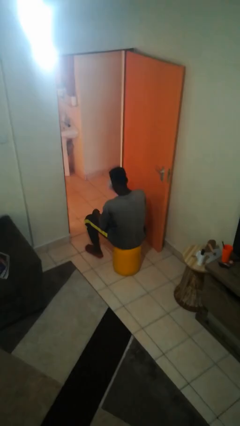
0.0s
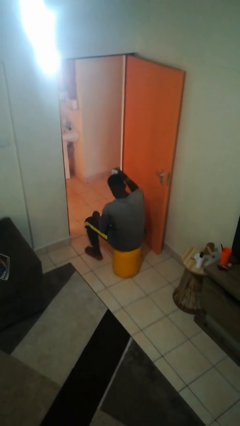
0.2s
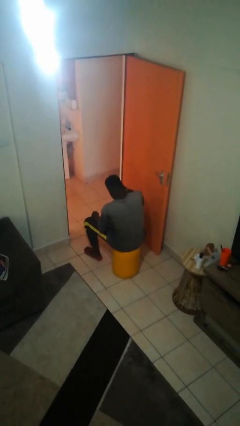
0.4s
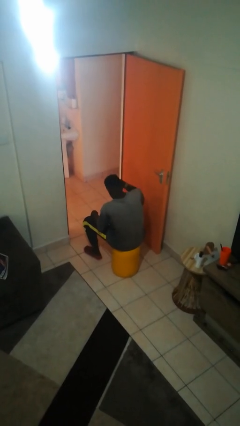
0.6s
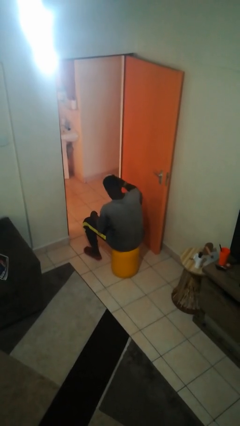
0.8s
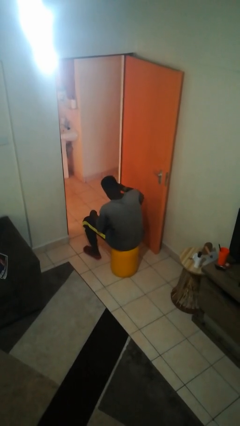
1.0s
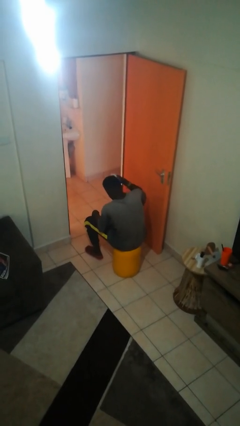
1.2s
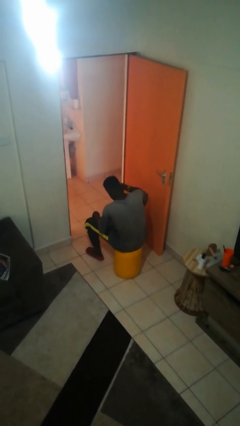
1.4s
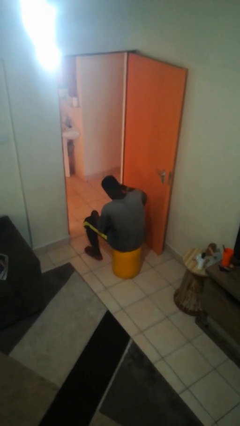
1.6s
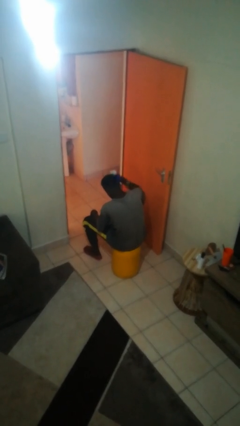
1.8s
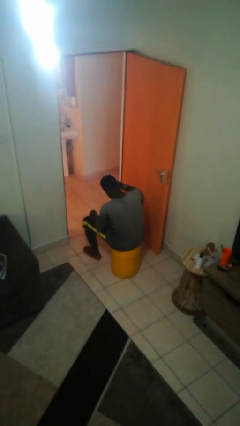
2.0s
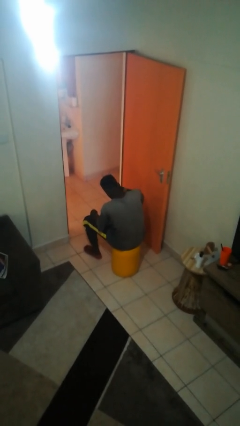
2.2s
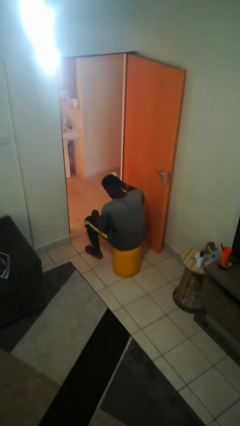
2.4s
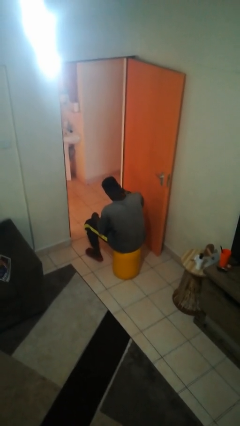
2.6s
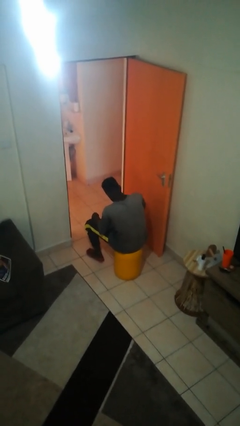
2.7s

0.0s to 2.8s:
person brushes hair

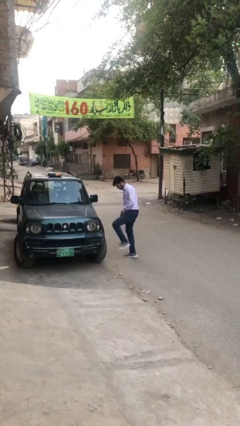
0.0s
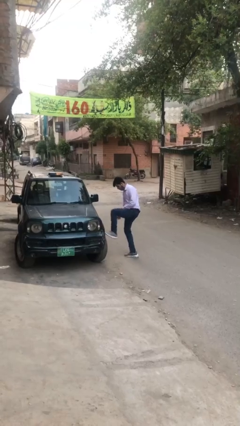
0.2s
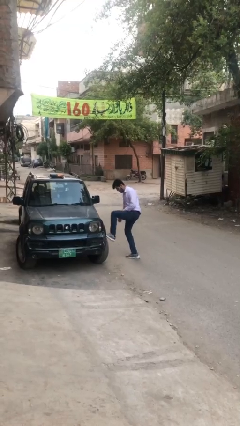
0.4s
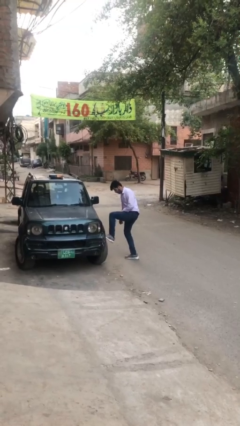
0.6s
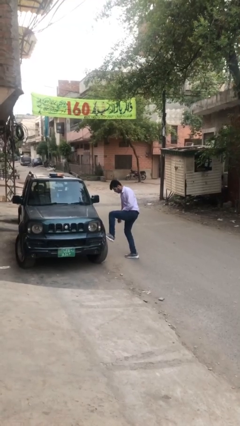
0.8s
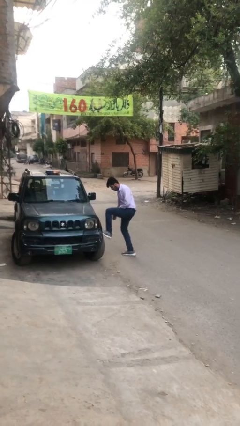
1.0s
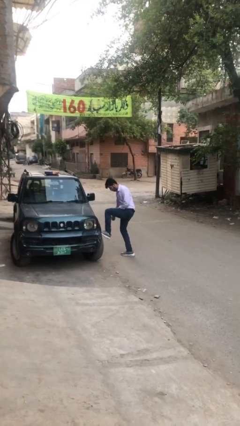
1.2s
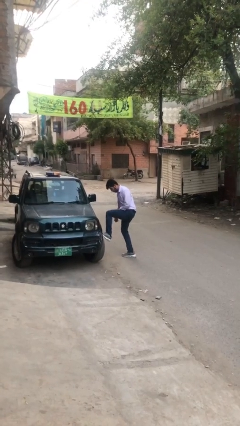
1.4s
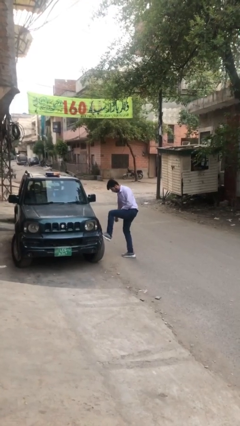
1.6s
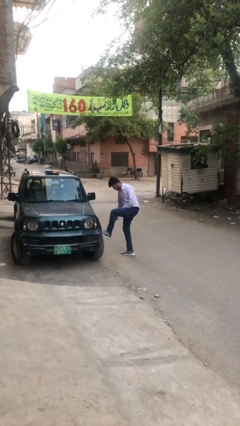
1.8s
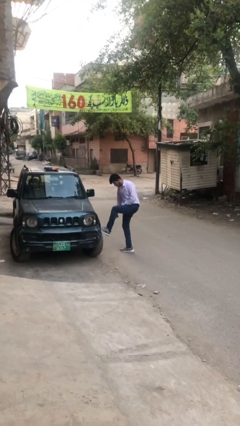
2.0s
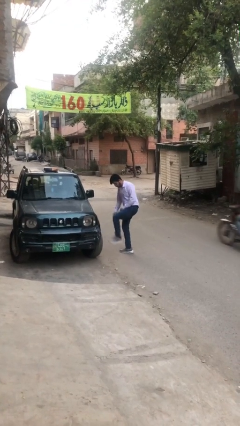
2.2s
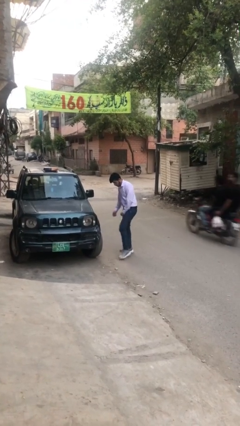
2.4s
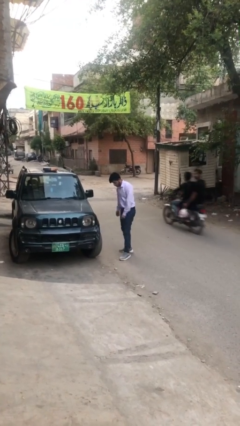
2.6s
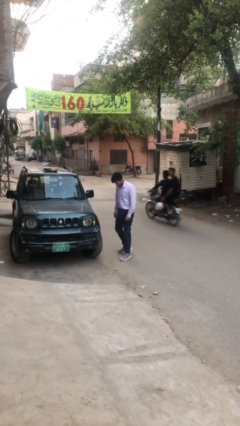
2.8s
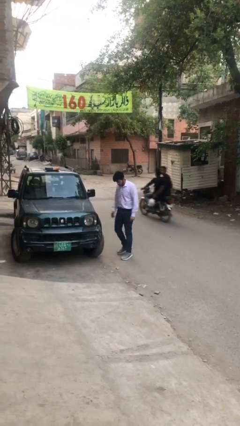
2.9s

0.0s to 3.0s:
person kicks car tires

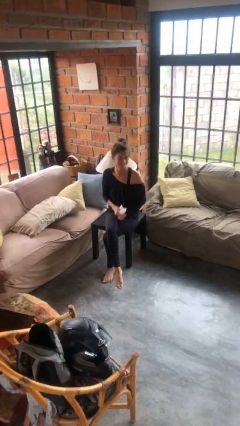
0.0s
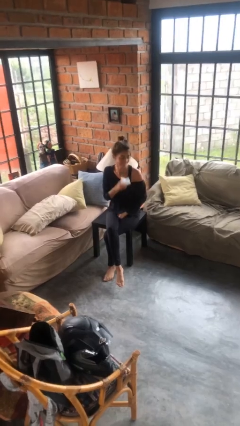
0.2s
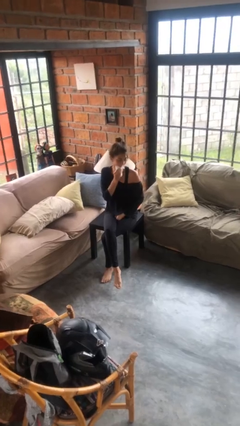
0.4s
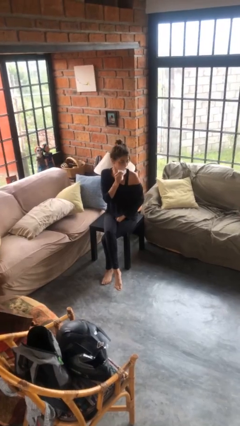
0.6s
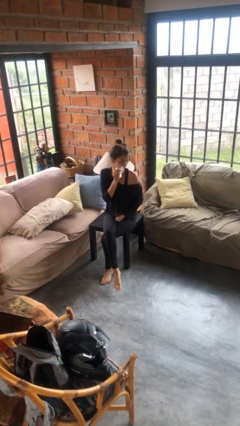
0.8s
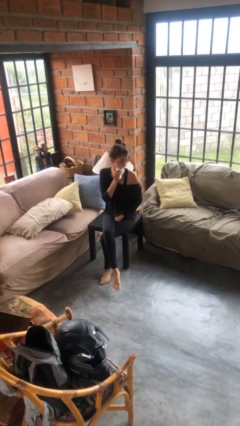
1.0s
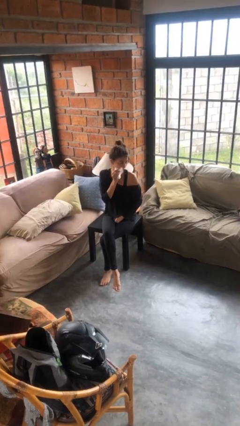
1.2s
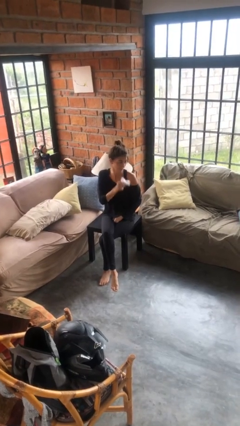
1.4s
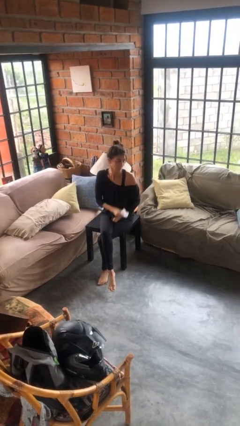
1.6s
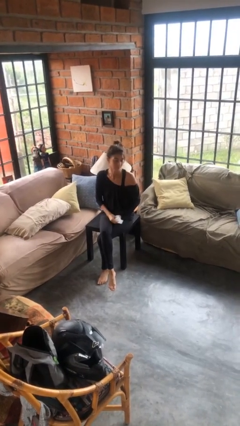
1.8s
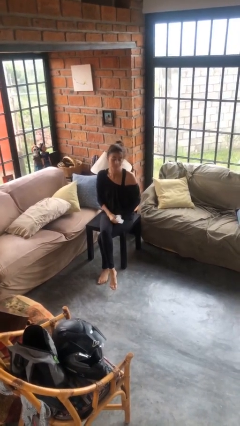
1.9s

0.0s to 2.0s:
person wipes mouth with napkin

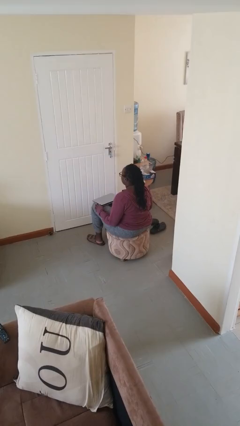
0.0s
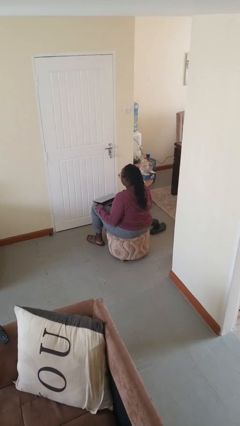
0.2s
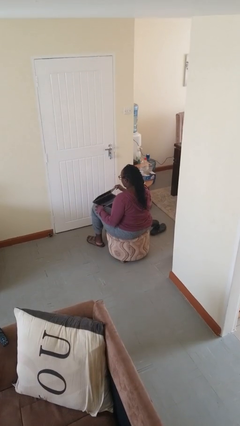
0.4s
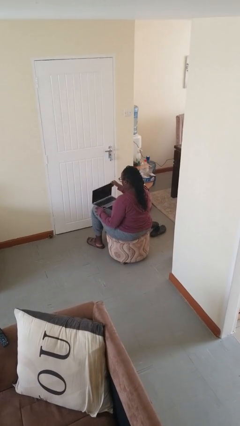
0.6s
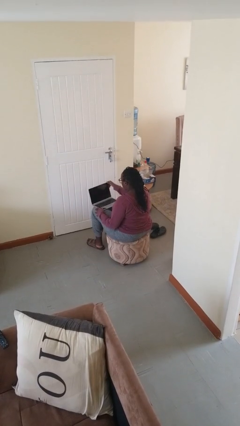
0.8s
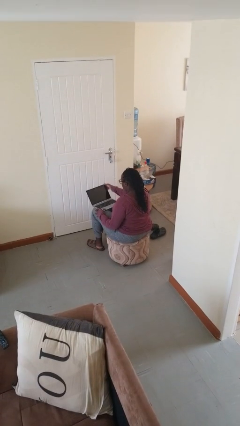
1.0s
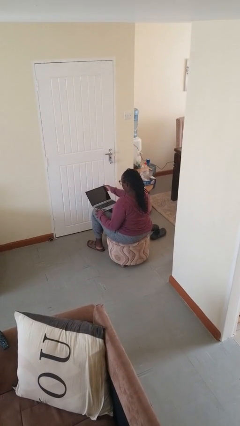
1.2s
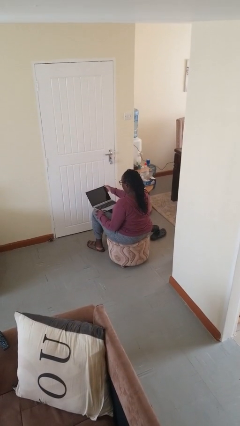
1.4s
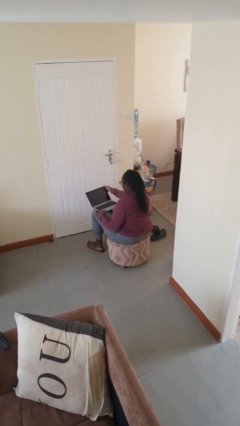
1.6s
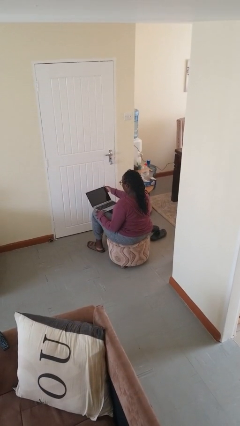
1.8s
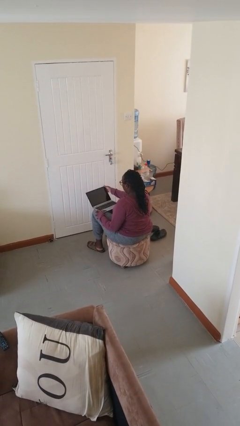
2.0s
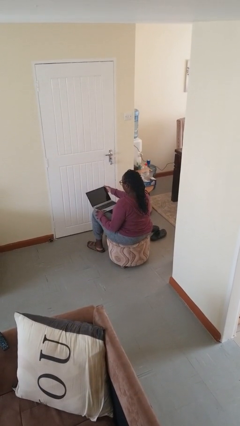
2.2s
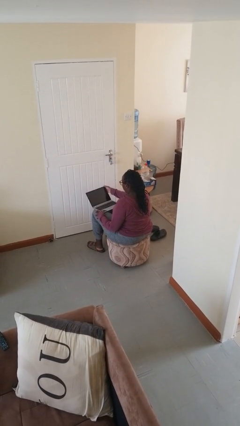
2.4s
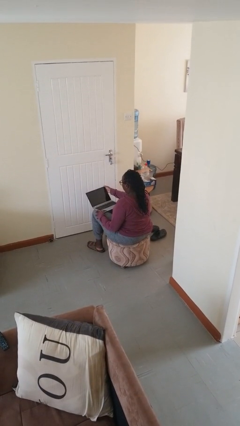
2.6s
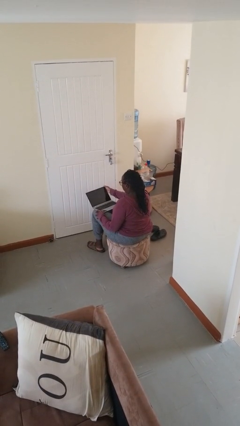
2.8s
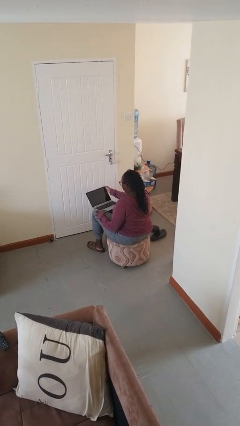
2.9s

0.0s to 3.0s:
person opens laptop

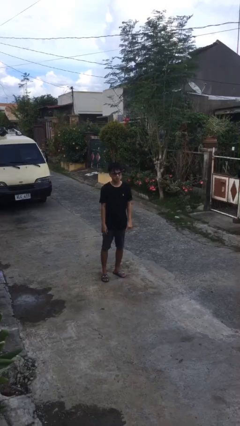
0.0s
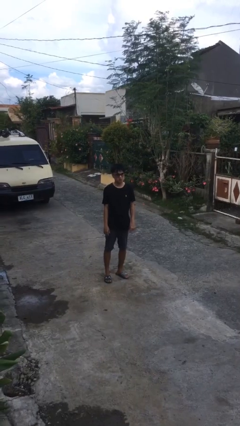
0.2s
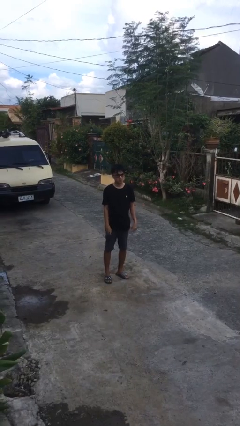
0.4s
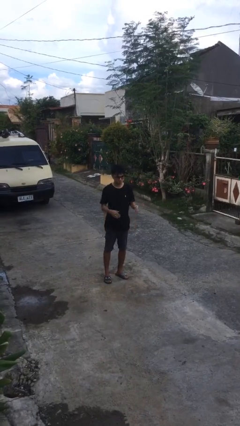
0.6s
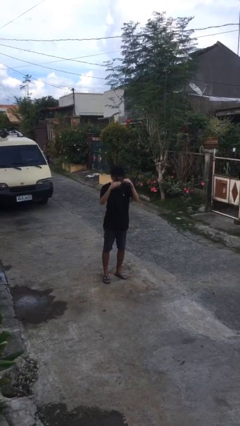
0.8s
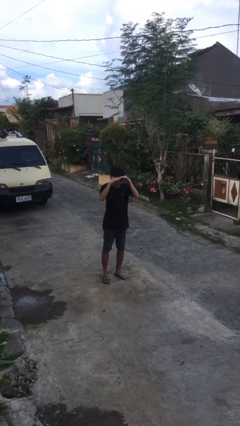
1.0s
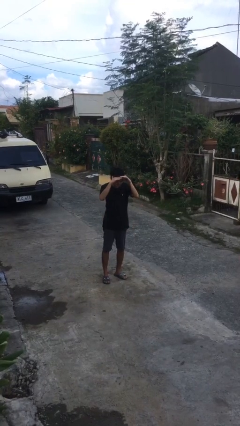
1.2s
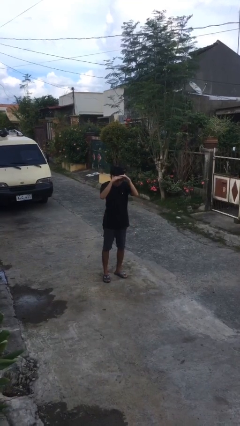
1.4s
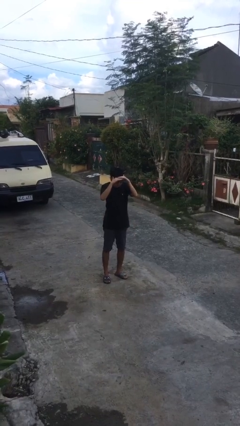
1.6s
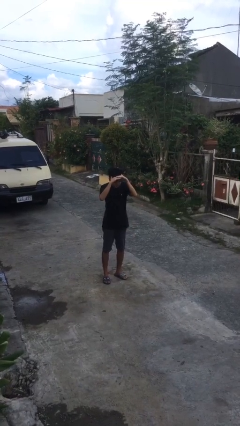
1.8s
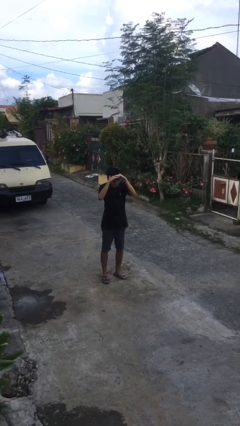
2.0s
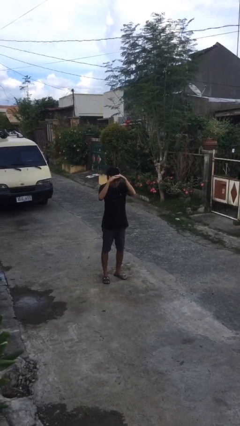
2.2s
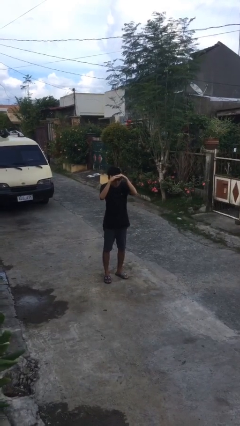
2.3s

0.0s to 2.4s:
person shades eyes

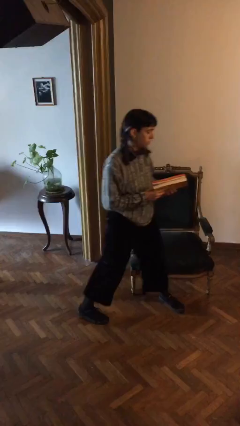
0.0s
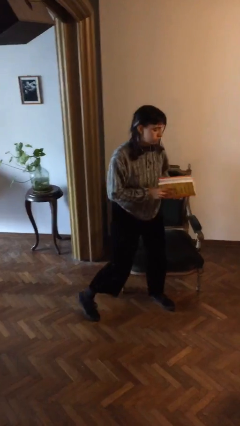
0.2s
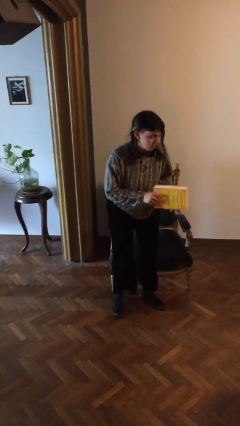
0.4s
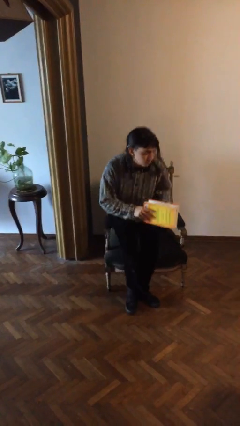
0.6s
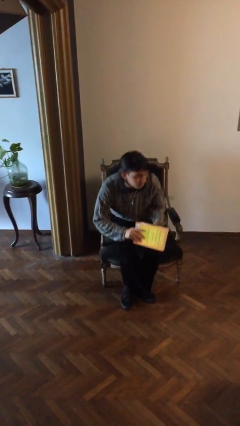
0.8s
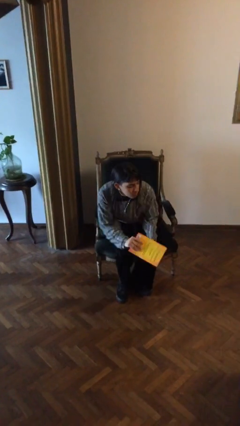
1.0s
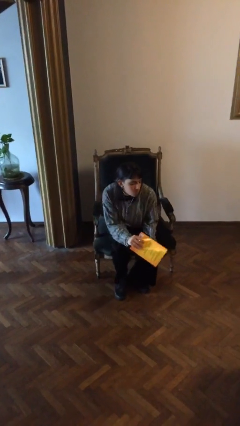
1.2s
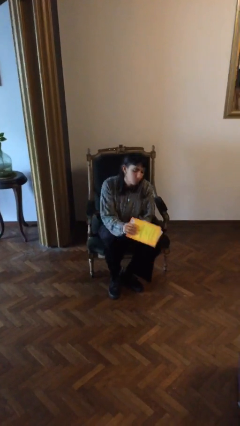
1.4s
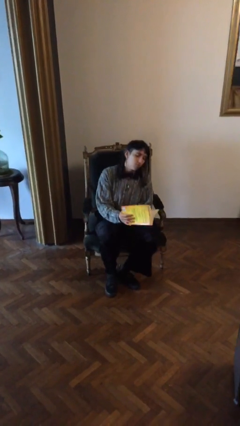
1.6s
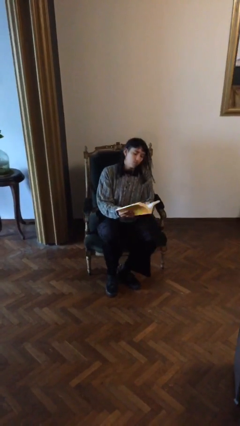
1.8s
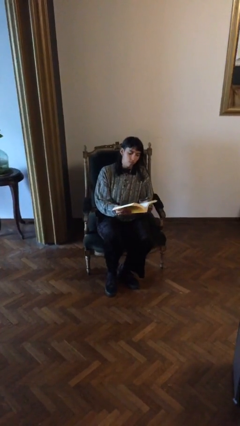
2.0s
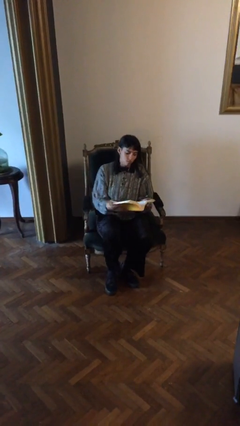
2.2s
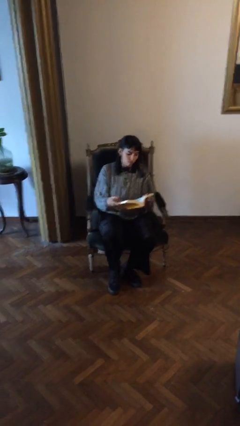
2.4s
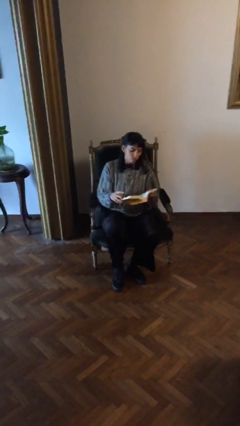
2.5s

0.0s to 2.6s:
person sits down

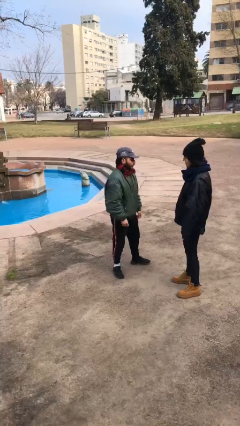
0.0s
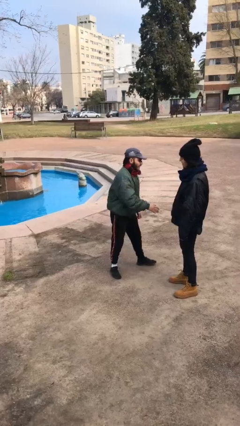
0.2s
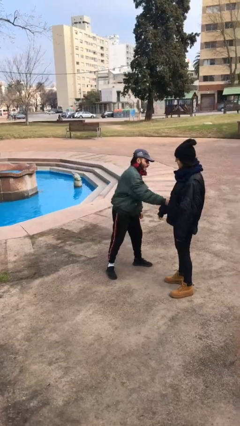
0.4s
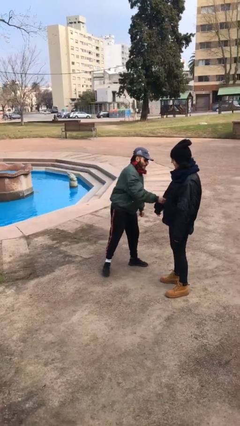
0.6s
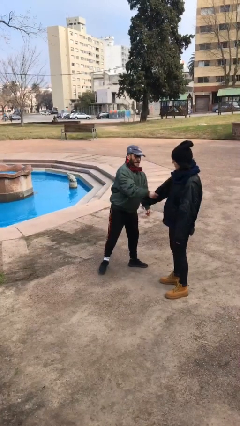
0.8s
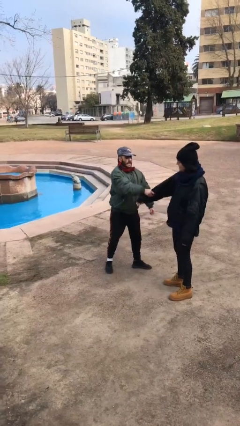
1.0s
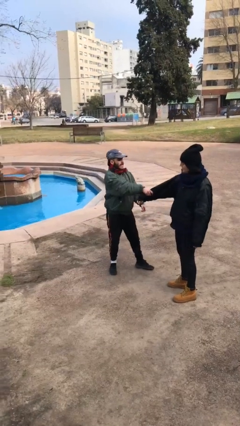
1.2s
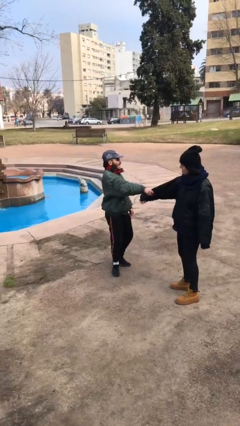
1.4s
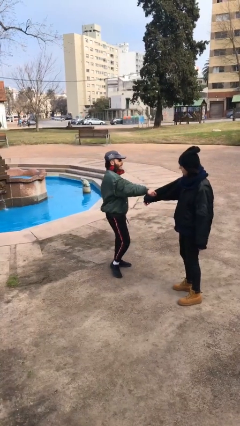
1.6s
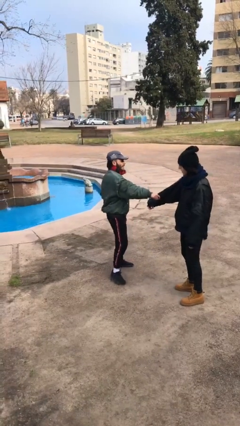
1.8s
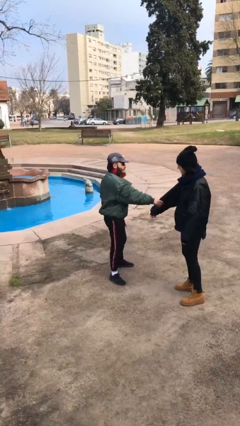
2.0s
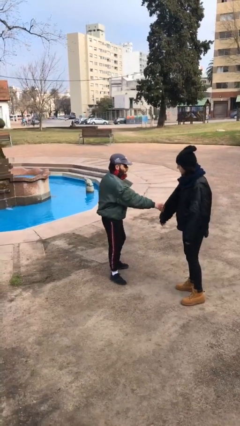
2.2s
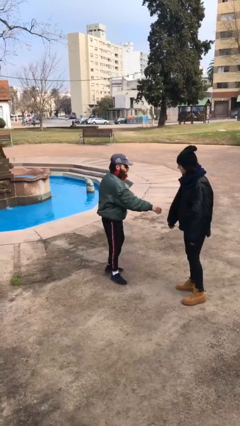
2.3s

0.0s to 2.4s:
person grabs person by forearm
